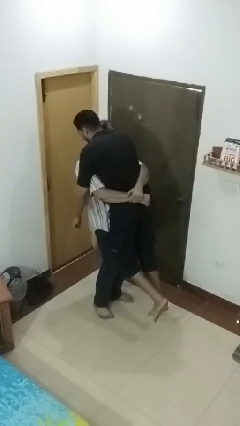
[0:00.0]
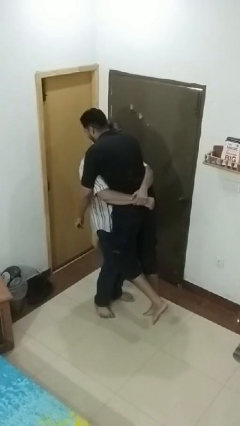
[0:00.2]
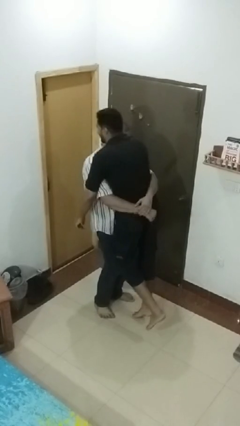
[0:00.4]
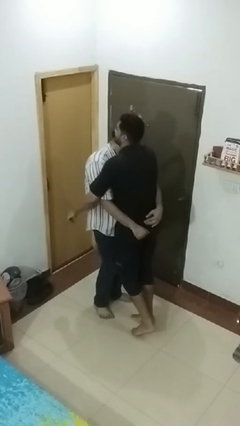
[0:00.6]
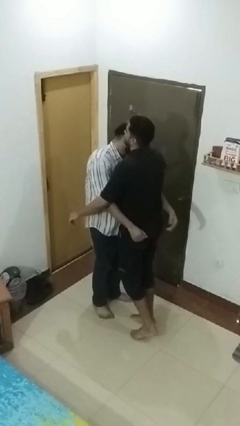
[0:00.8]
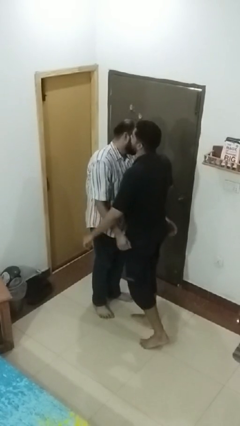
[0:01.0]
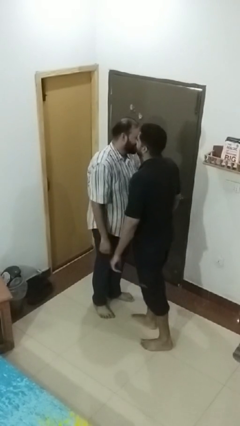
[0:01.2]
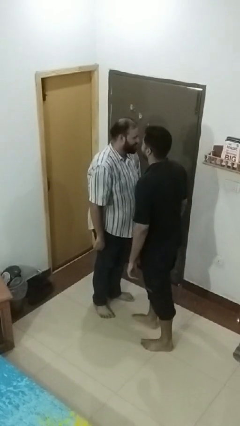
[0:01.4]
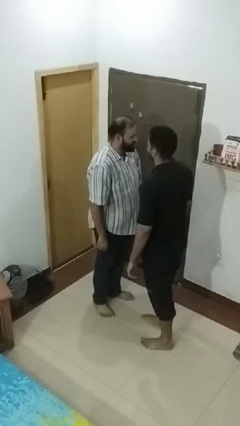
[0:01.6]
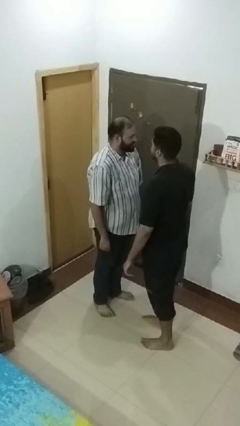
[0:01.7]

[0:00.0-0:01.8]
person puts down person

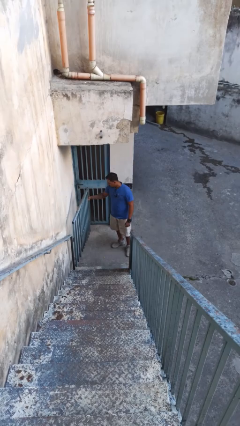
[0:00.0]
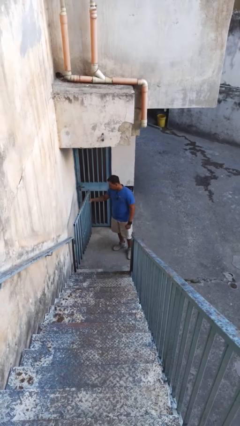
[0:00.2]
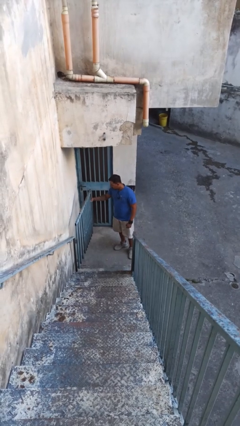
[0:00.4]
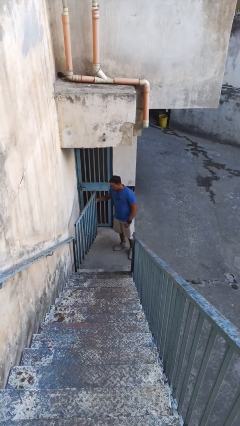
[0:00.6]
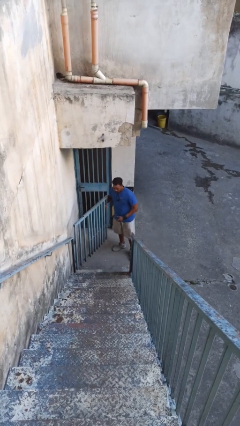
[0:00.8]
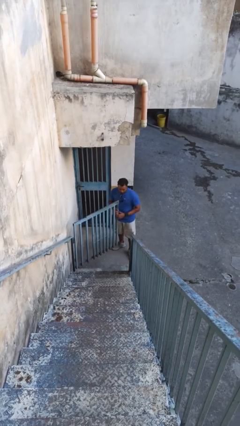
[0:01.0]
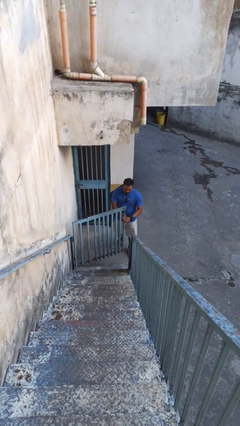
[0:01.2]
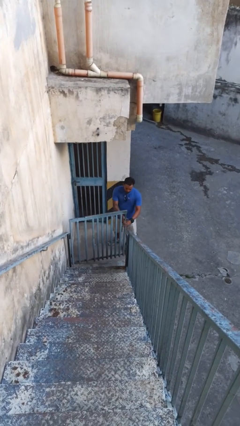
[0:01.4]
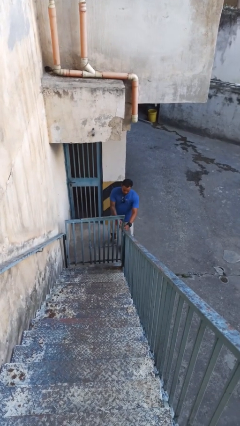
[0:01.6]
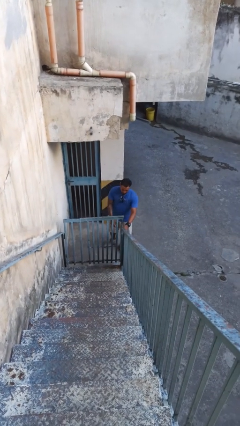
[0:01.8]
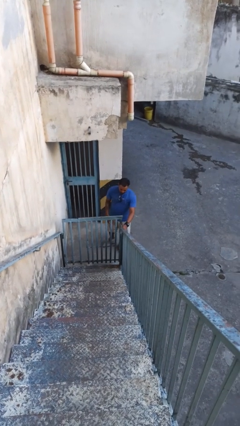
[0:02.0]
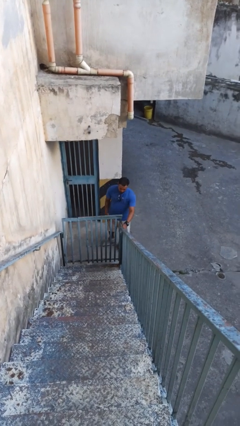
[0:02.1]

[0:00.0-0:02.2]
person closes facility door

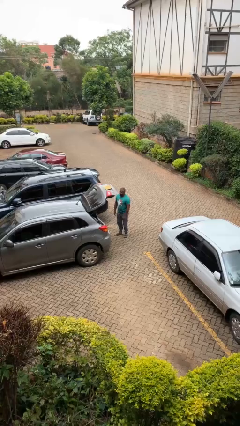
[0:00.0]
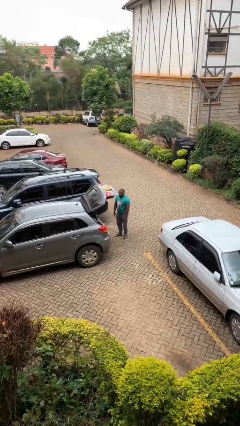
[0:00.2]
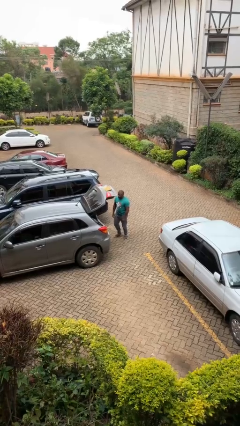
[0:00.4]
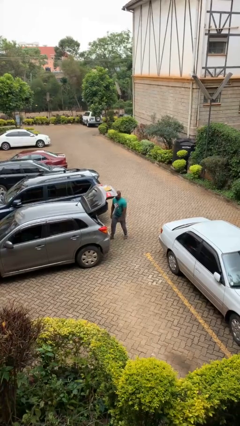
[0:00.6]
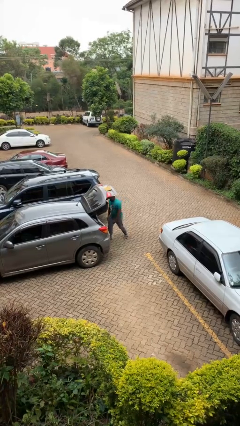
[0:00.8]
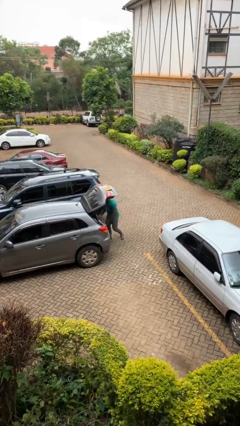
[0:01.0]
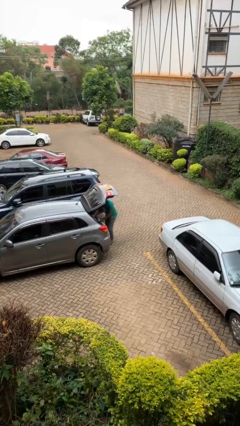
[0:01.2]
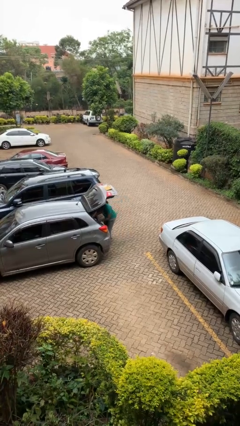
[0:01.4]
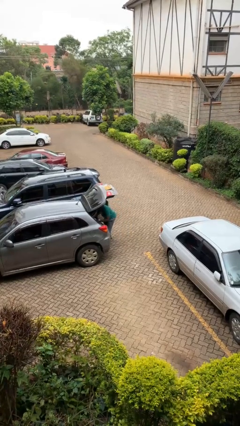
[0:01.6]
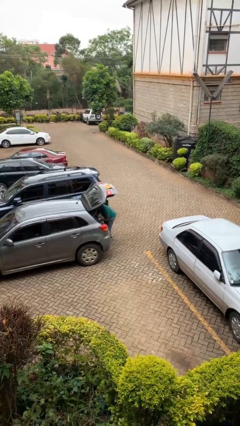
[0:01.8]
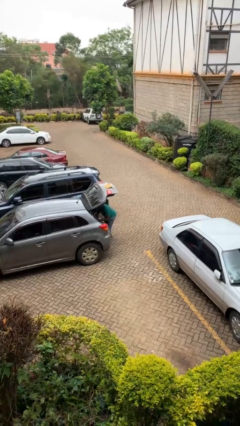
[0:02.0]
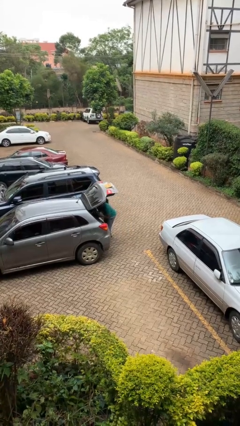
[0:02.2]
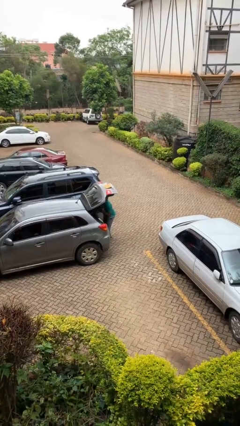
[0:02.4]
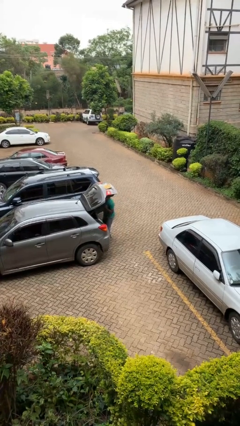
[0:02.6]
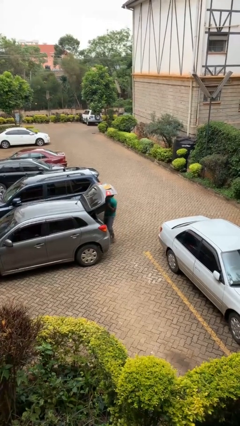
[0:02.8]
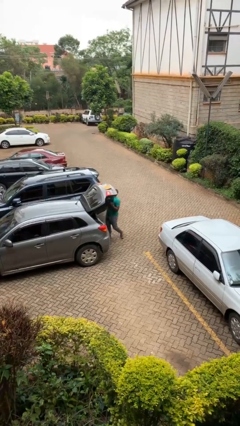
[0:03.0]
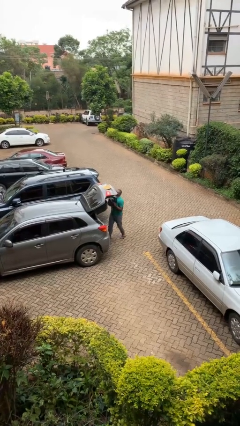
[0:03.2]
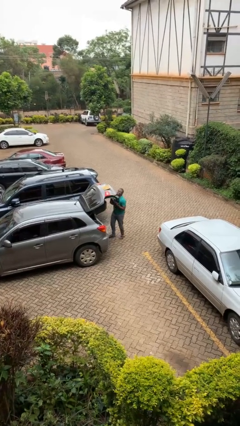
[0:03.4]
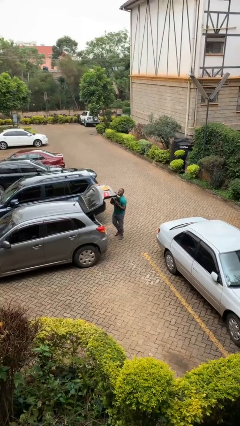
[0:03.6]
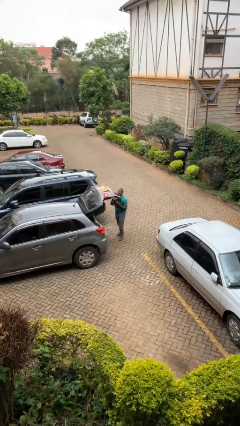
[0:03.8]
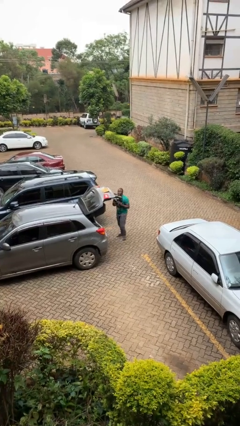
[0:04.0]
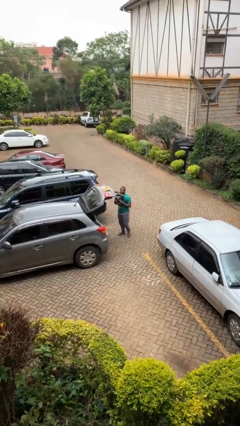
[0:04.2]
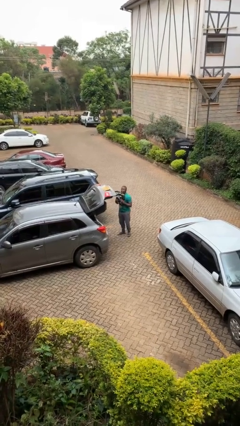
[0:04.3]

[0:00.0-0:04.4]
person unloads car

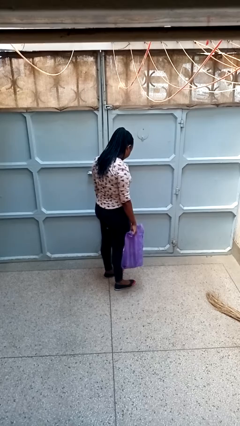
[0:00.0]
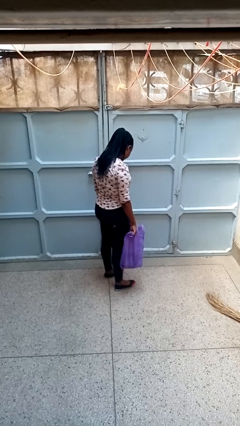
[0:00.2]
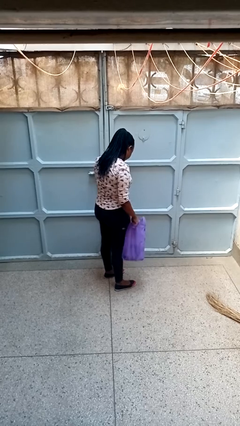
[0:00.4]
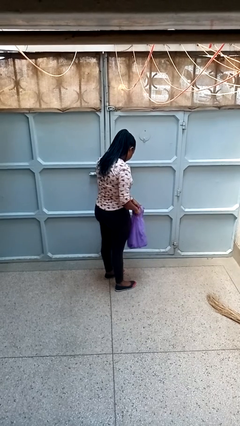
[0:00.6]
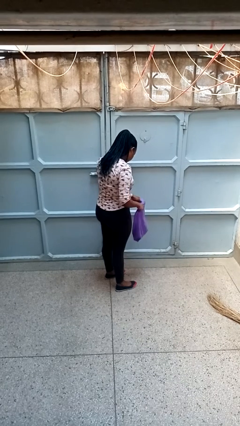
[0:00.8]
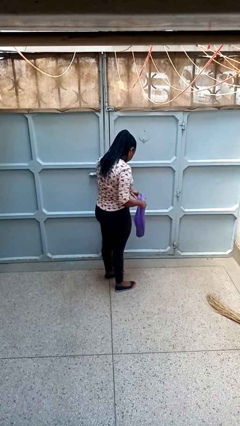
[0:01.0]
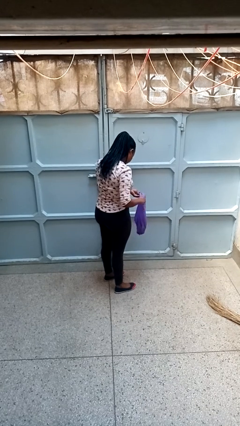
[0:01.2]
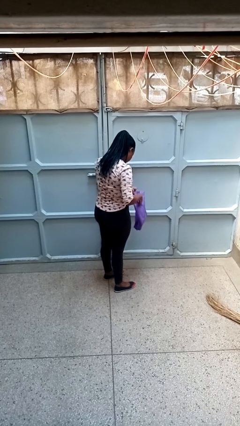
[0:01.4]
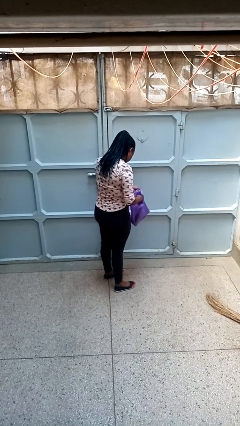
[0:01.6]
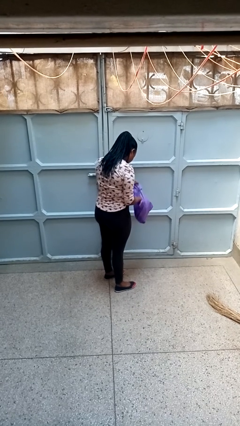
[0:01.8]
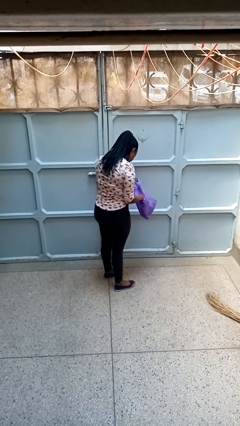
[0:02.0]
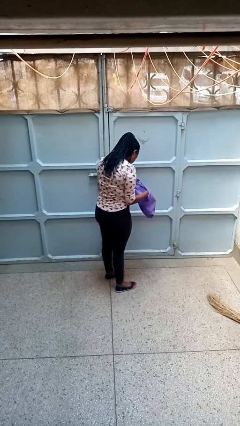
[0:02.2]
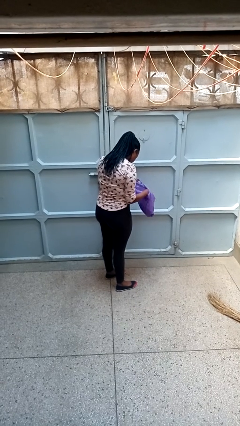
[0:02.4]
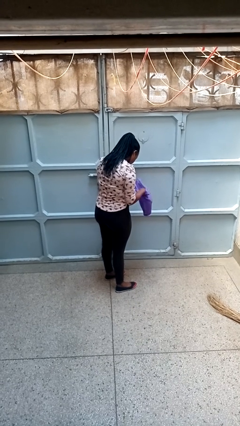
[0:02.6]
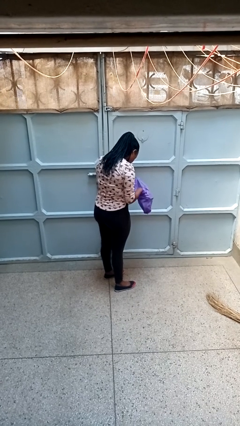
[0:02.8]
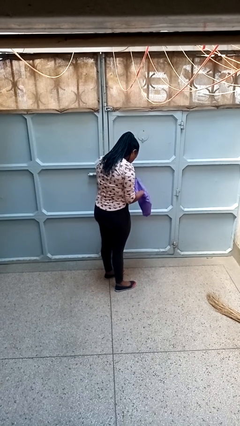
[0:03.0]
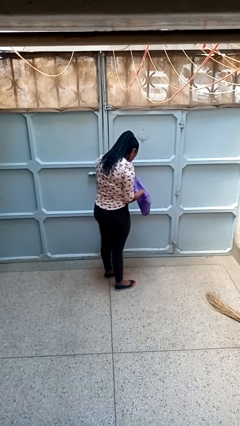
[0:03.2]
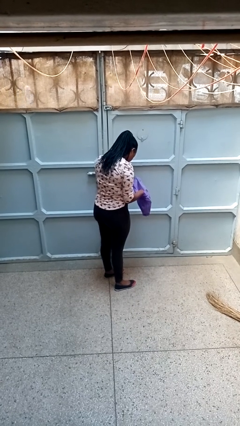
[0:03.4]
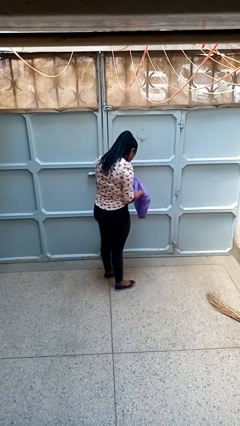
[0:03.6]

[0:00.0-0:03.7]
person searches in bag

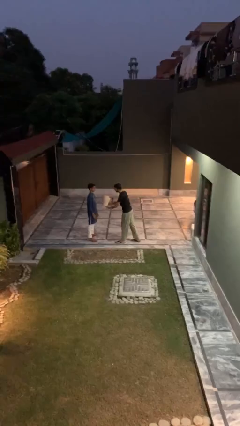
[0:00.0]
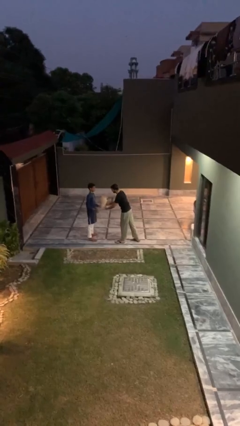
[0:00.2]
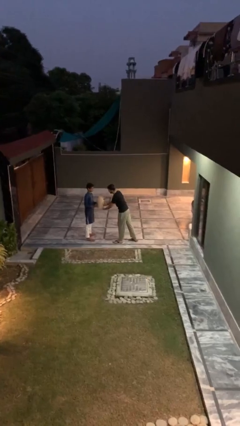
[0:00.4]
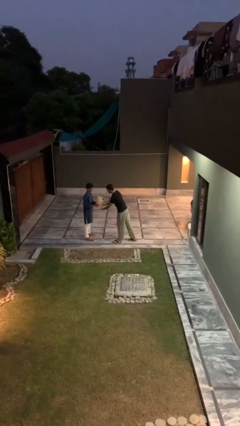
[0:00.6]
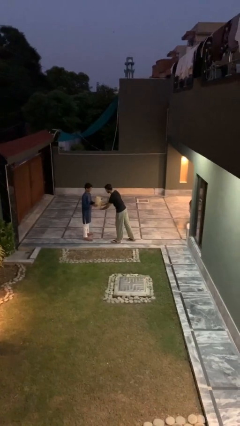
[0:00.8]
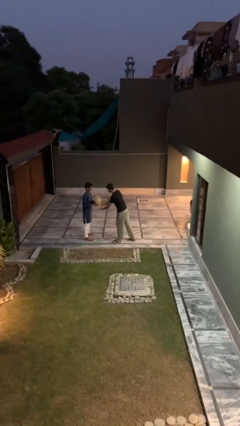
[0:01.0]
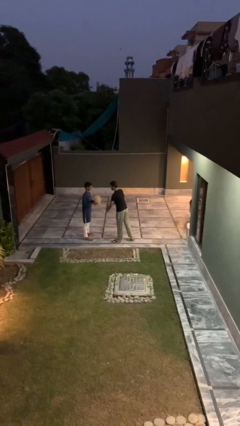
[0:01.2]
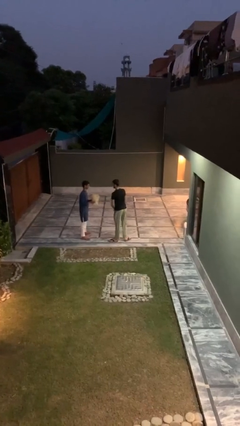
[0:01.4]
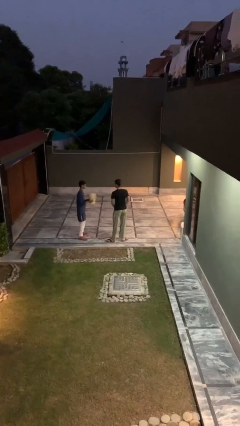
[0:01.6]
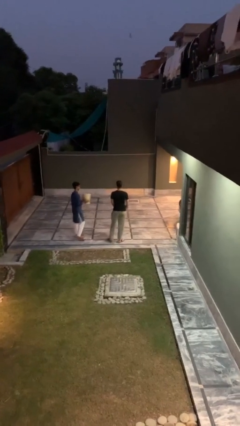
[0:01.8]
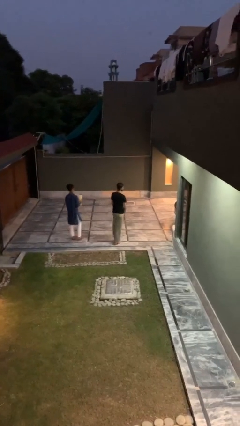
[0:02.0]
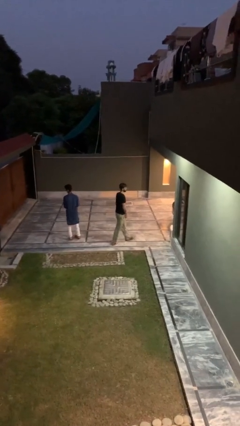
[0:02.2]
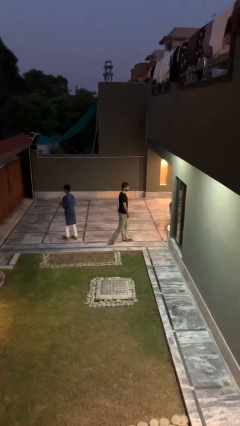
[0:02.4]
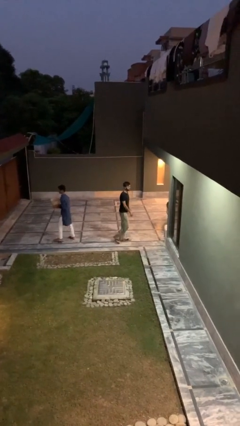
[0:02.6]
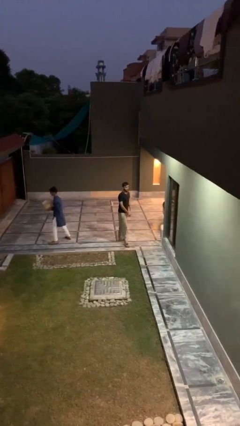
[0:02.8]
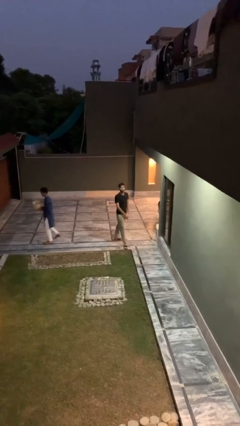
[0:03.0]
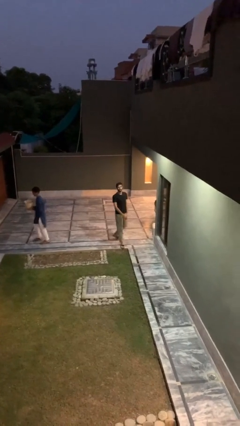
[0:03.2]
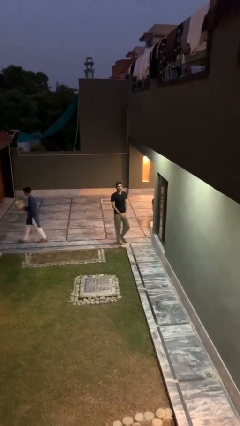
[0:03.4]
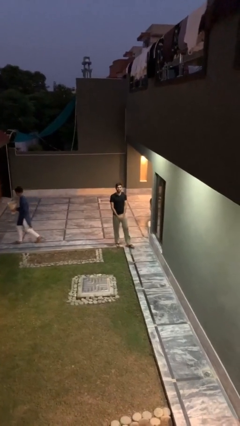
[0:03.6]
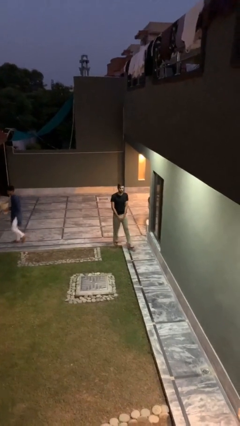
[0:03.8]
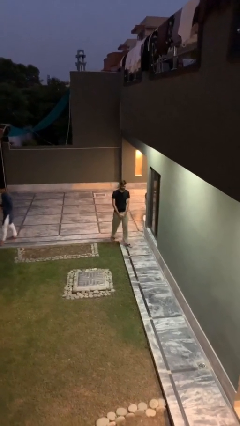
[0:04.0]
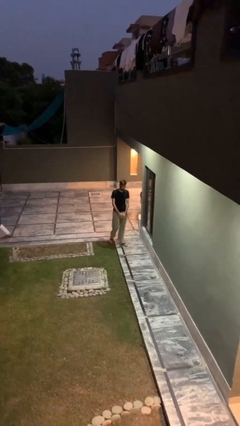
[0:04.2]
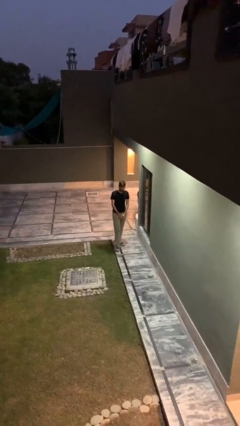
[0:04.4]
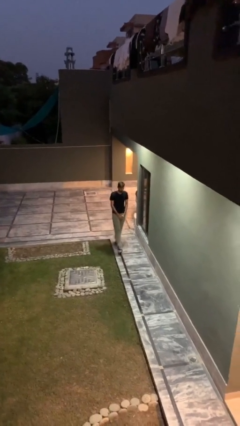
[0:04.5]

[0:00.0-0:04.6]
person transfers object to person

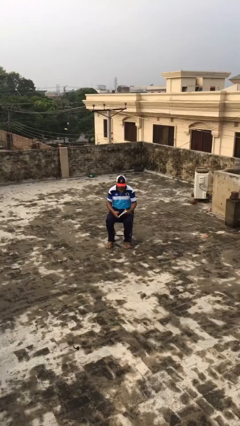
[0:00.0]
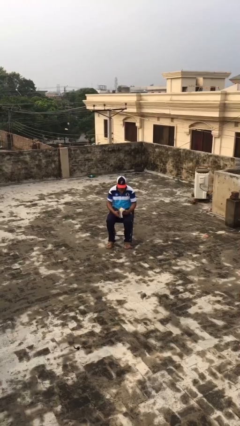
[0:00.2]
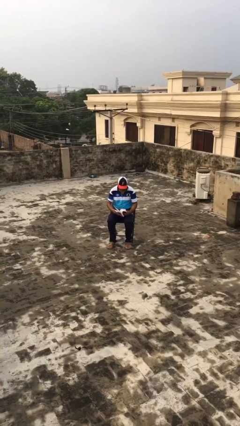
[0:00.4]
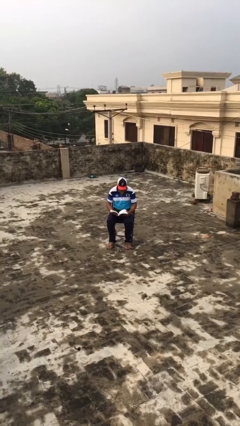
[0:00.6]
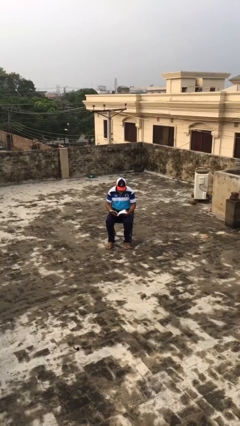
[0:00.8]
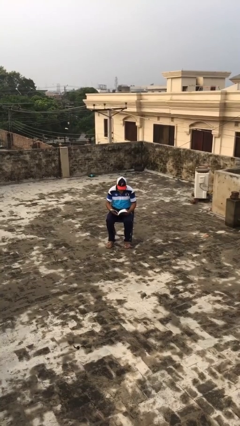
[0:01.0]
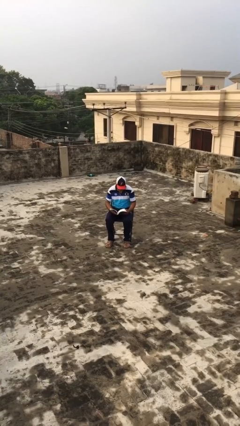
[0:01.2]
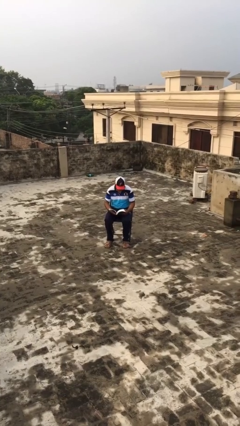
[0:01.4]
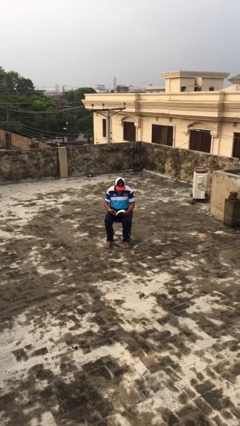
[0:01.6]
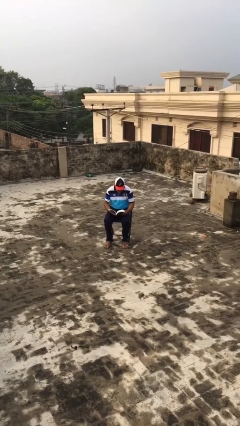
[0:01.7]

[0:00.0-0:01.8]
person reads document
